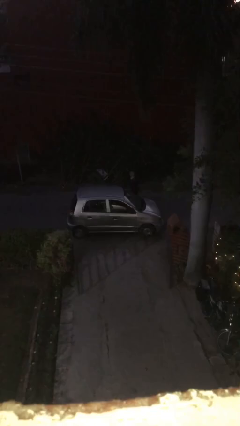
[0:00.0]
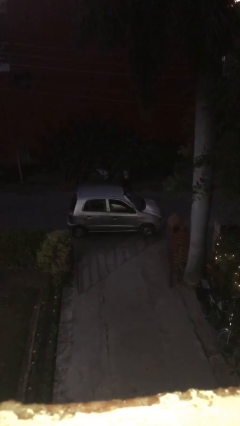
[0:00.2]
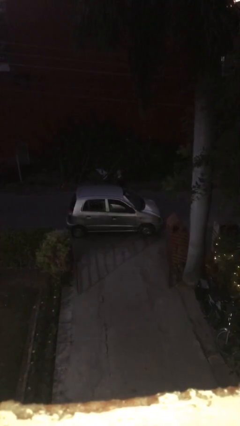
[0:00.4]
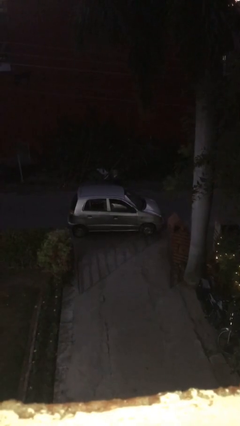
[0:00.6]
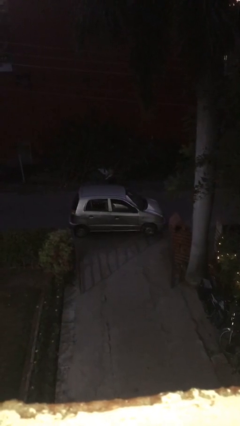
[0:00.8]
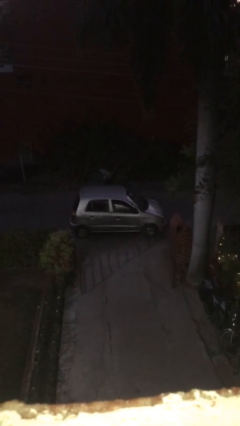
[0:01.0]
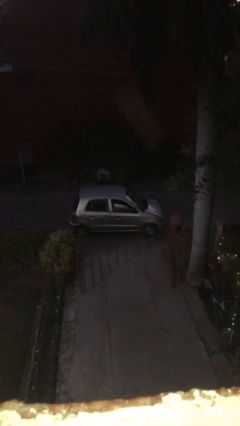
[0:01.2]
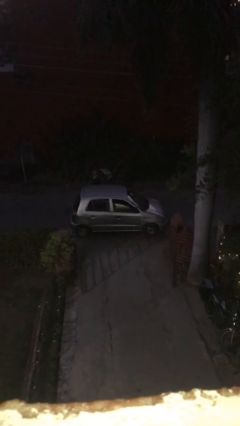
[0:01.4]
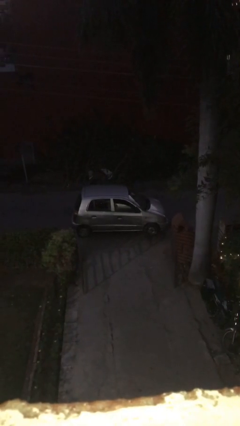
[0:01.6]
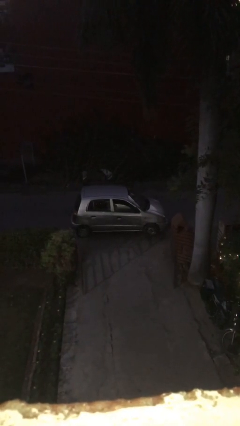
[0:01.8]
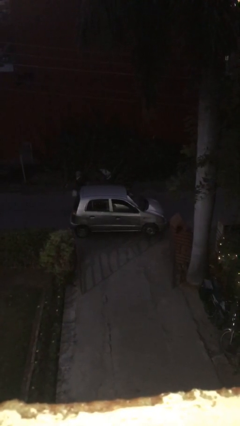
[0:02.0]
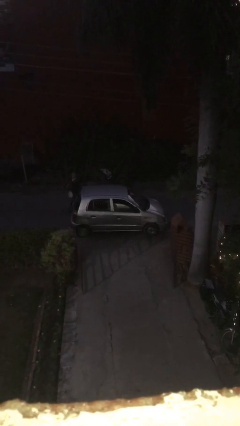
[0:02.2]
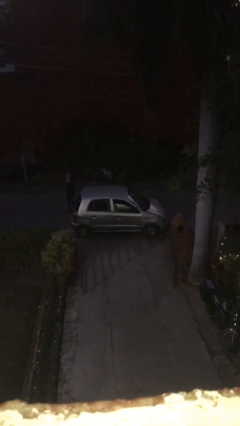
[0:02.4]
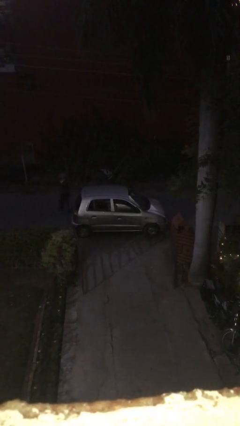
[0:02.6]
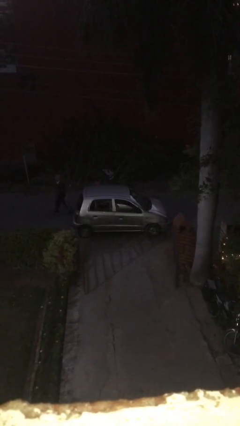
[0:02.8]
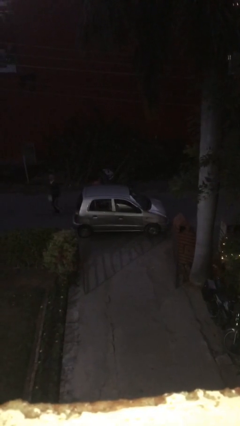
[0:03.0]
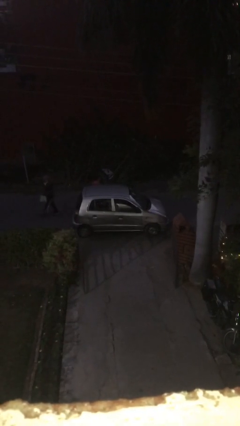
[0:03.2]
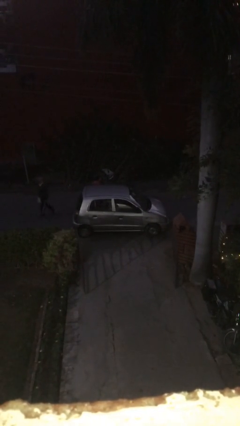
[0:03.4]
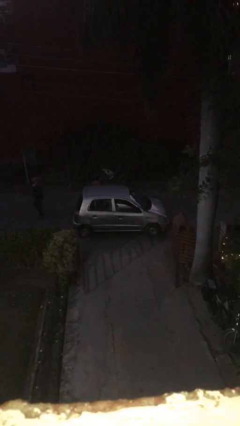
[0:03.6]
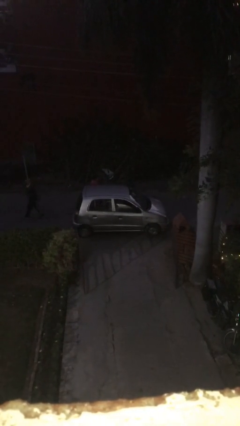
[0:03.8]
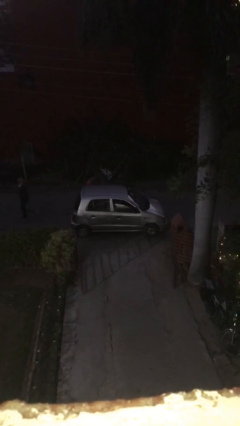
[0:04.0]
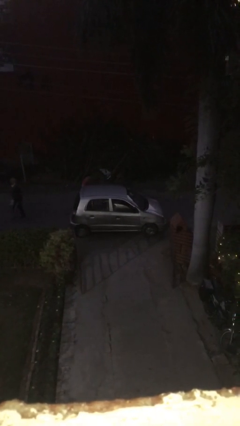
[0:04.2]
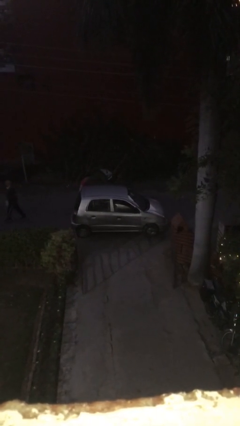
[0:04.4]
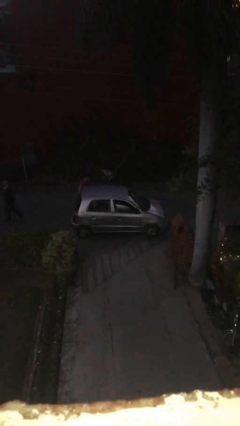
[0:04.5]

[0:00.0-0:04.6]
car drops off person

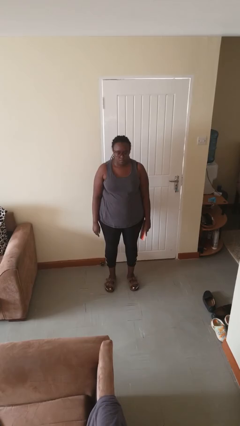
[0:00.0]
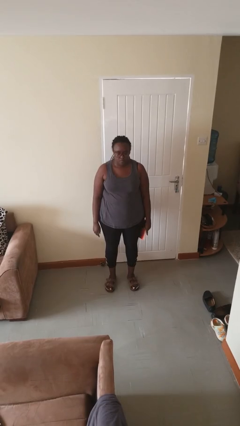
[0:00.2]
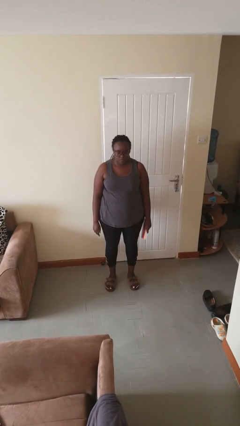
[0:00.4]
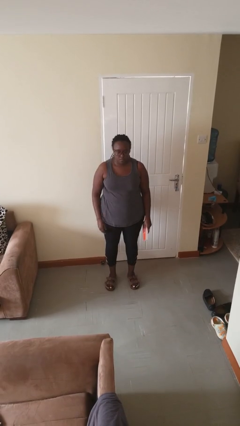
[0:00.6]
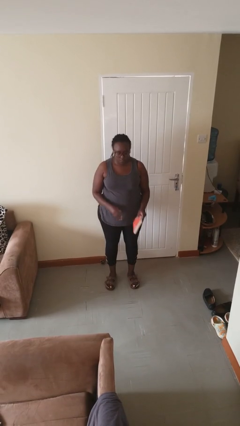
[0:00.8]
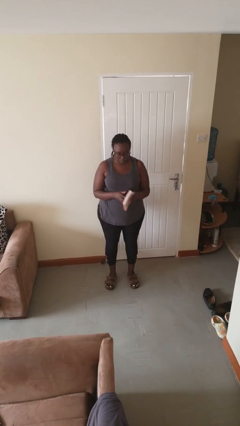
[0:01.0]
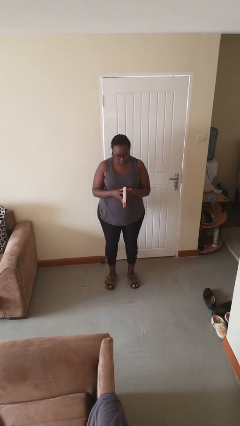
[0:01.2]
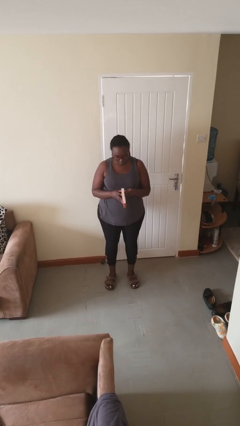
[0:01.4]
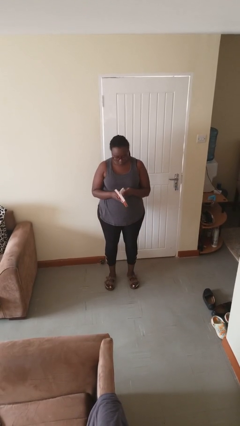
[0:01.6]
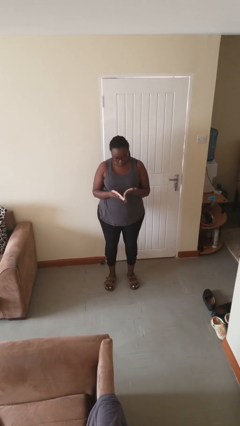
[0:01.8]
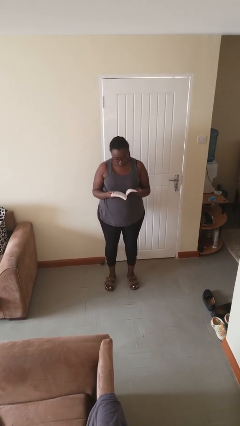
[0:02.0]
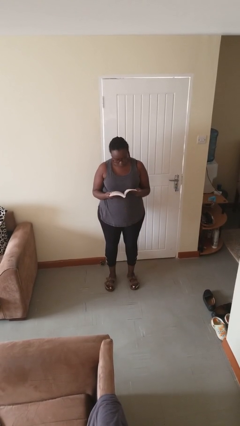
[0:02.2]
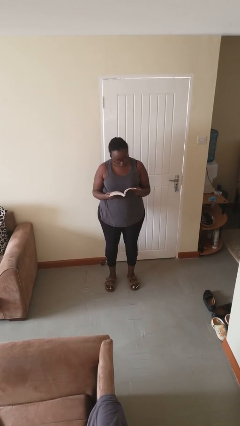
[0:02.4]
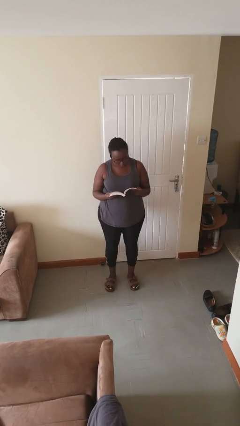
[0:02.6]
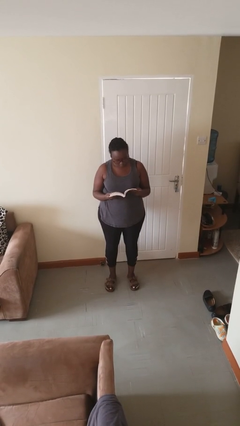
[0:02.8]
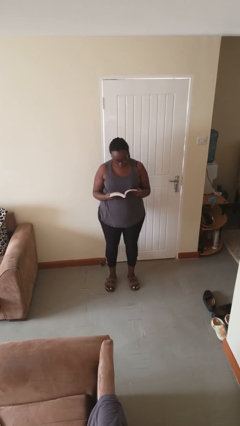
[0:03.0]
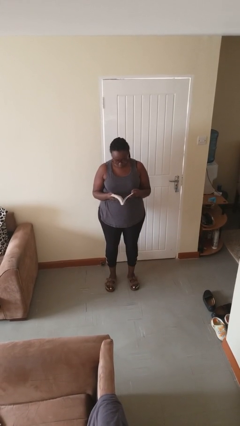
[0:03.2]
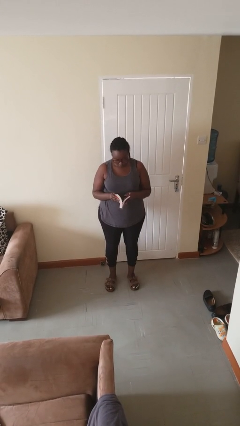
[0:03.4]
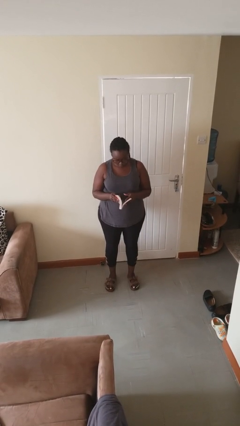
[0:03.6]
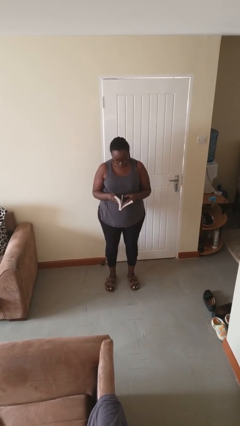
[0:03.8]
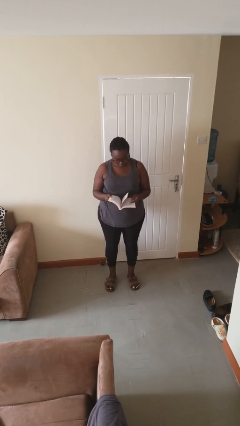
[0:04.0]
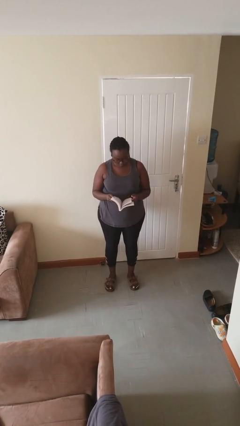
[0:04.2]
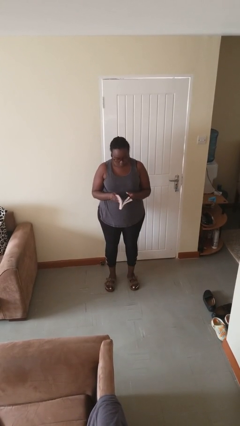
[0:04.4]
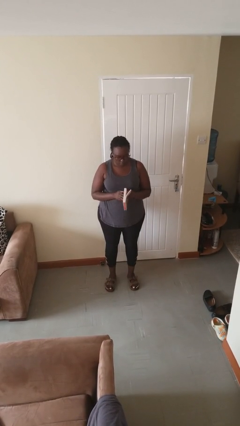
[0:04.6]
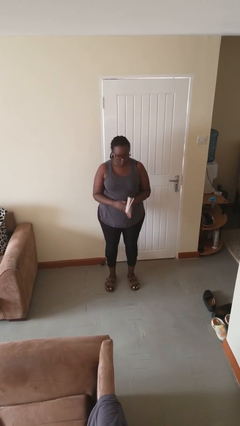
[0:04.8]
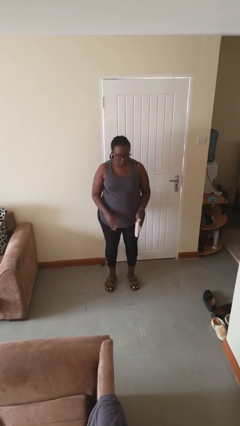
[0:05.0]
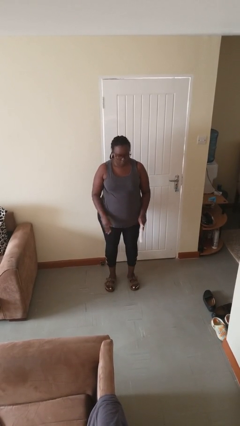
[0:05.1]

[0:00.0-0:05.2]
person reads book

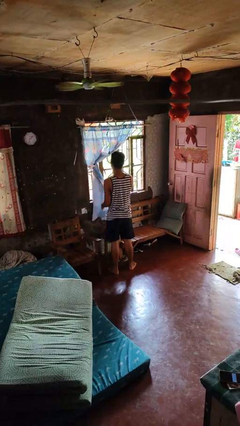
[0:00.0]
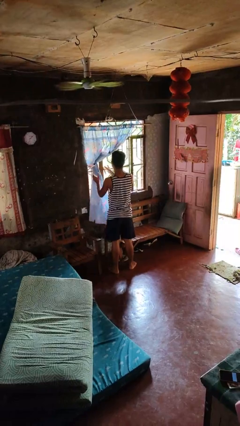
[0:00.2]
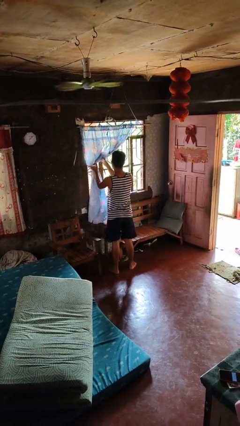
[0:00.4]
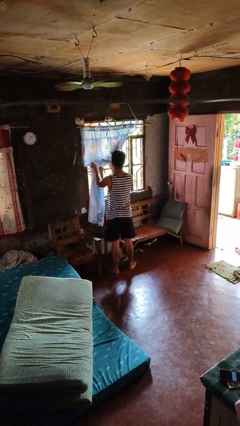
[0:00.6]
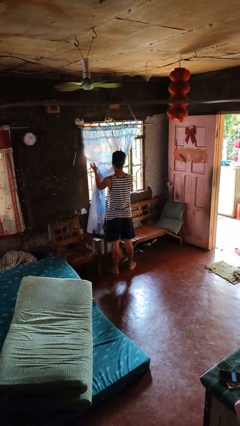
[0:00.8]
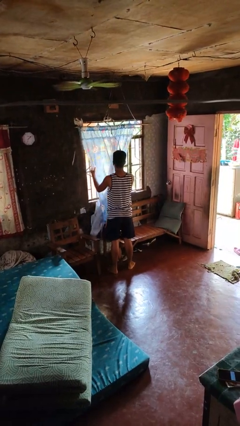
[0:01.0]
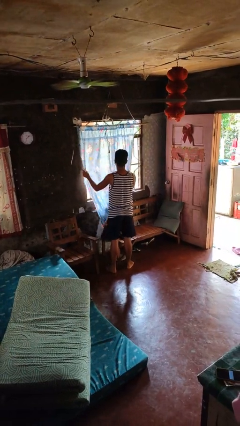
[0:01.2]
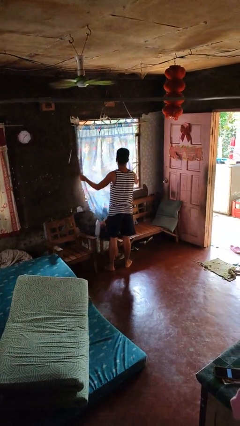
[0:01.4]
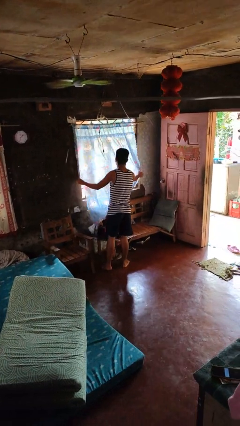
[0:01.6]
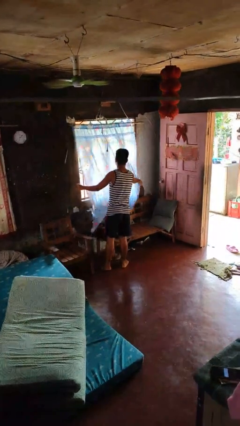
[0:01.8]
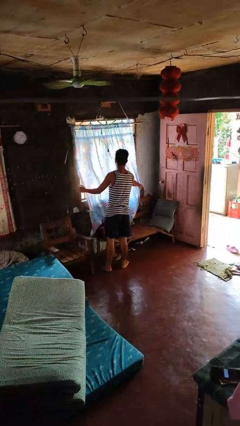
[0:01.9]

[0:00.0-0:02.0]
person closes curtains

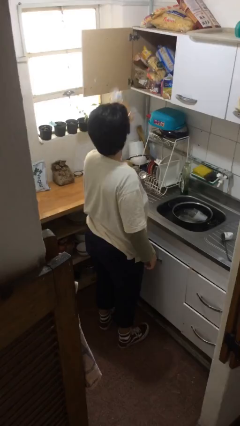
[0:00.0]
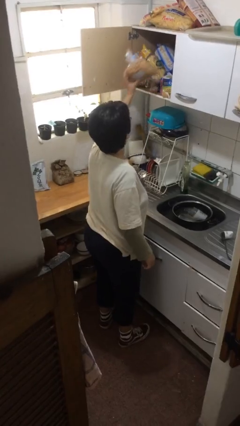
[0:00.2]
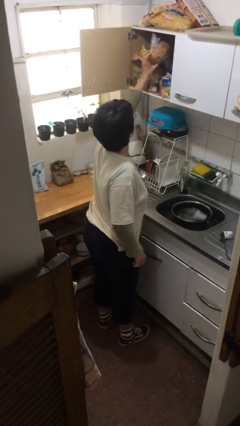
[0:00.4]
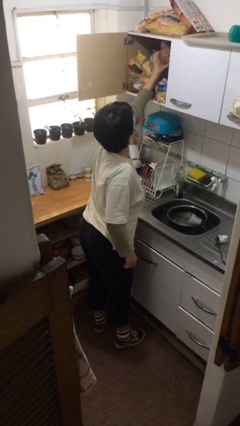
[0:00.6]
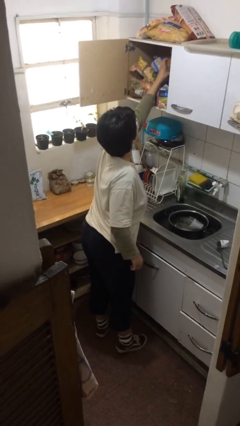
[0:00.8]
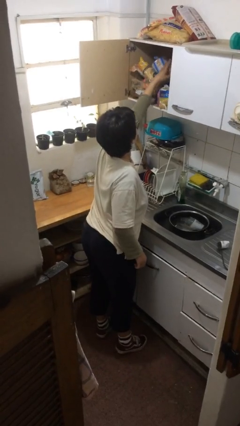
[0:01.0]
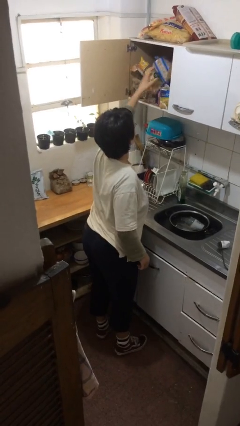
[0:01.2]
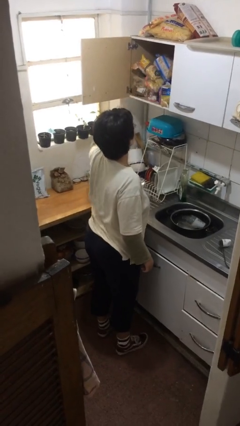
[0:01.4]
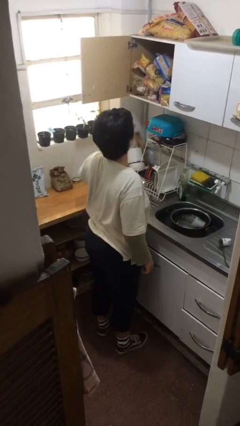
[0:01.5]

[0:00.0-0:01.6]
person puts object in cabinet

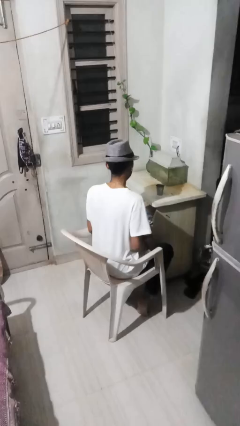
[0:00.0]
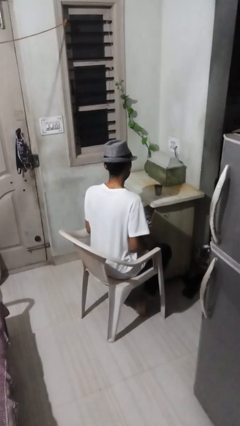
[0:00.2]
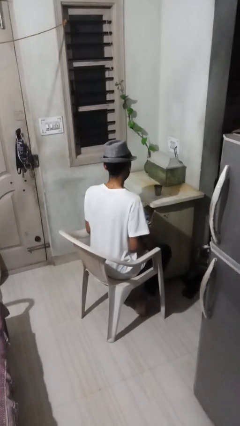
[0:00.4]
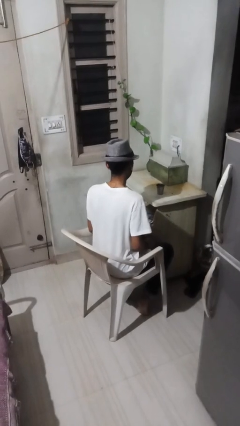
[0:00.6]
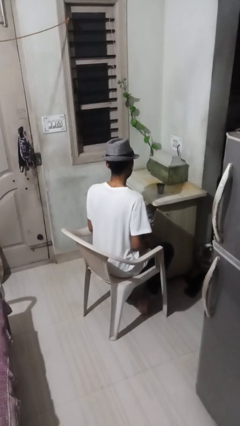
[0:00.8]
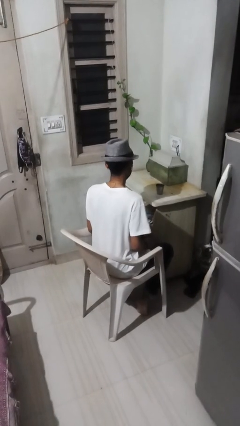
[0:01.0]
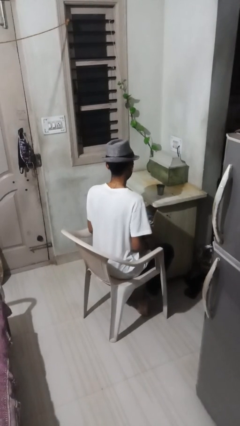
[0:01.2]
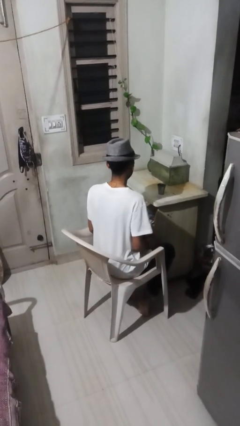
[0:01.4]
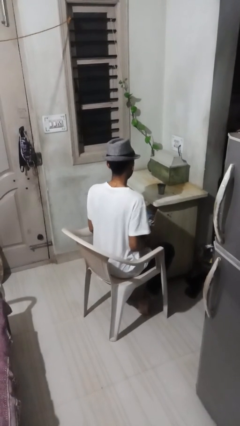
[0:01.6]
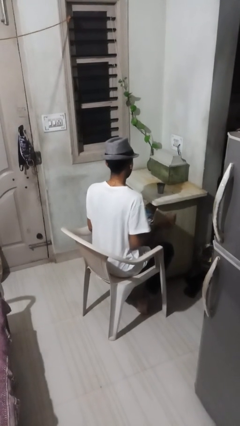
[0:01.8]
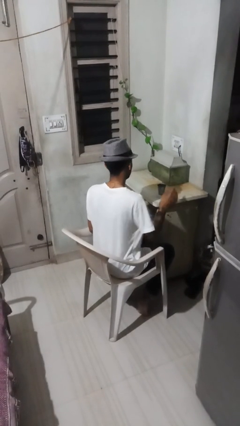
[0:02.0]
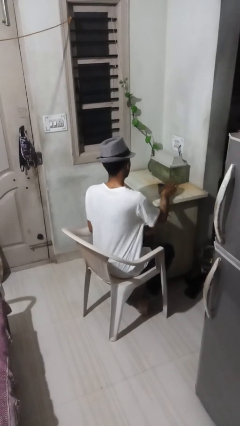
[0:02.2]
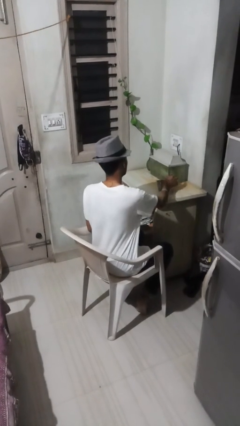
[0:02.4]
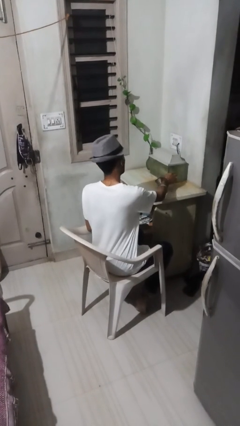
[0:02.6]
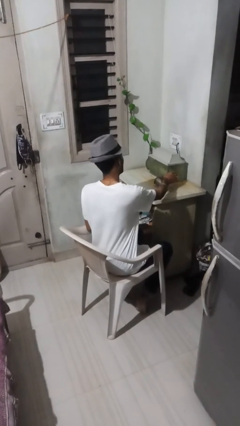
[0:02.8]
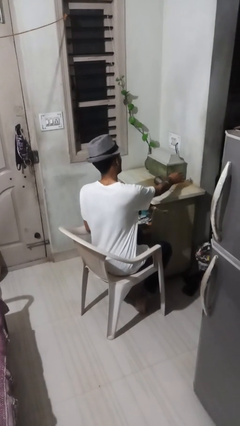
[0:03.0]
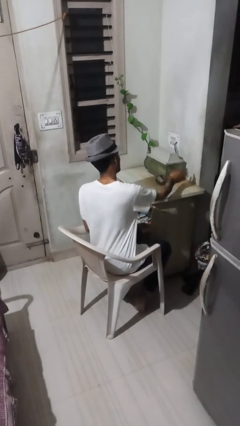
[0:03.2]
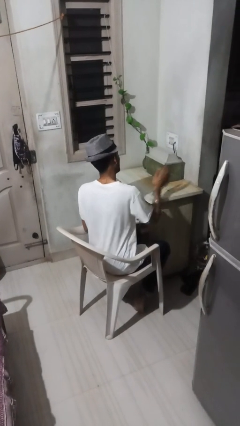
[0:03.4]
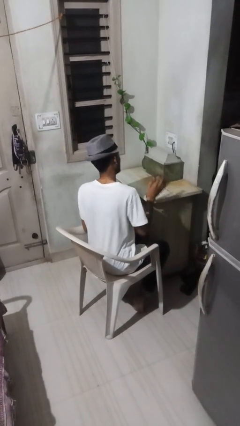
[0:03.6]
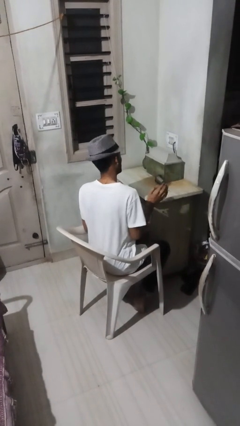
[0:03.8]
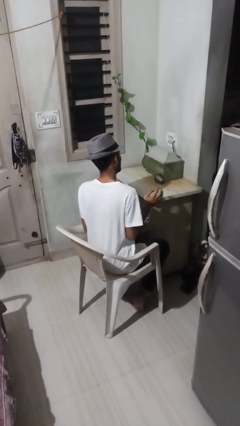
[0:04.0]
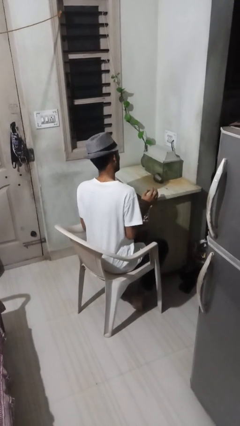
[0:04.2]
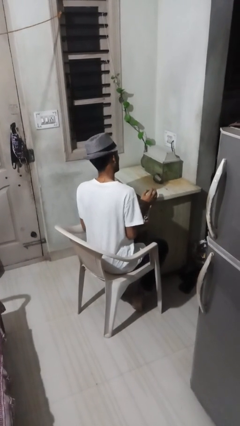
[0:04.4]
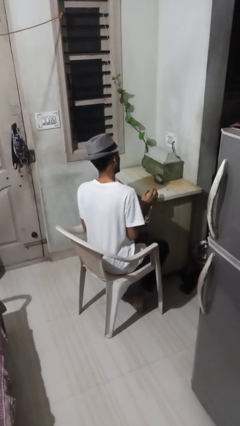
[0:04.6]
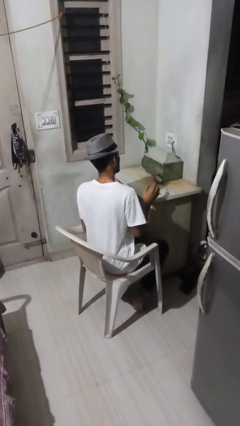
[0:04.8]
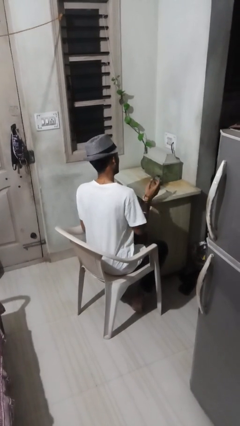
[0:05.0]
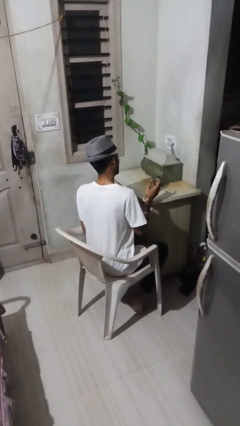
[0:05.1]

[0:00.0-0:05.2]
person knocks over glass
